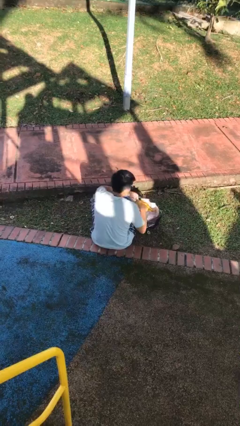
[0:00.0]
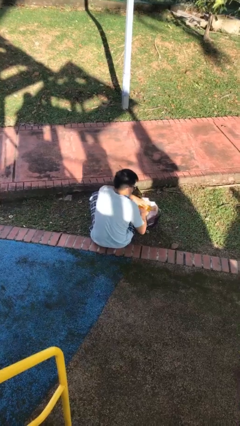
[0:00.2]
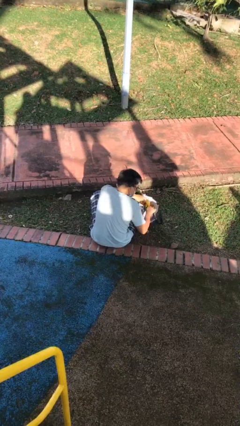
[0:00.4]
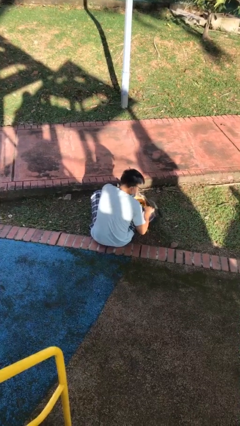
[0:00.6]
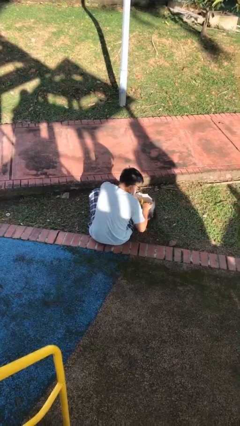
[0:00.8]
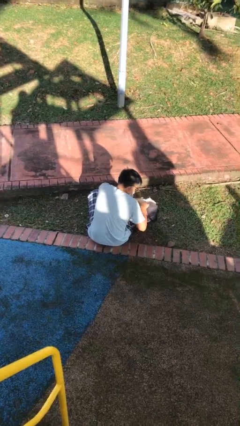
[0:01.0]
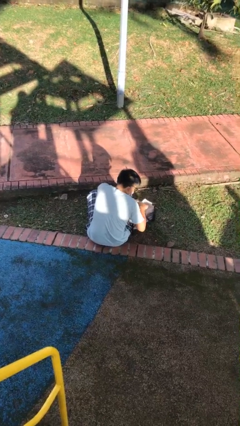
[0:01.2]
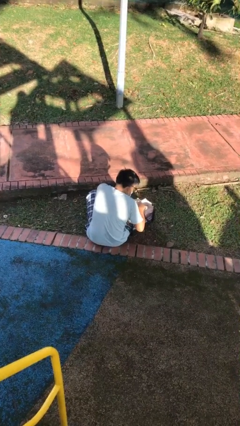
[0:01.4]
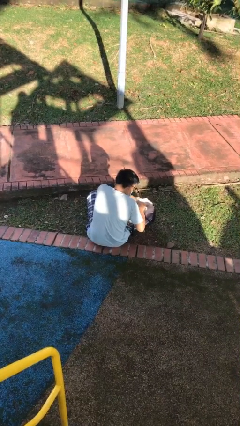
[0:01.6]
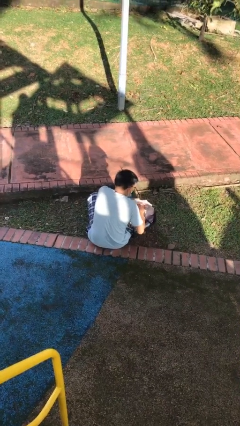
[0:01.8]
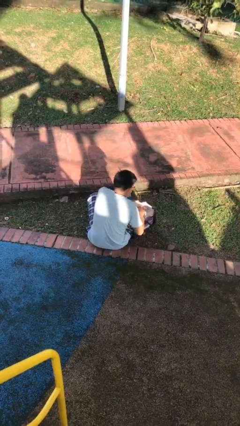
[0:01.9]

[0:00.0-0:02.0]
person searches in bag

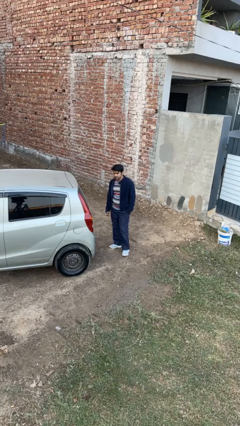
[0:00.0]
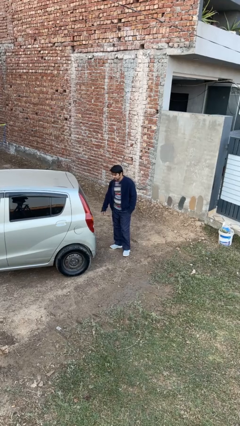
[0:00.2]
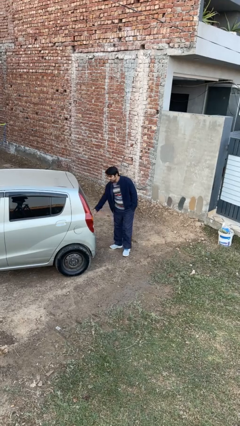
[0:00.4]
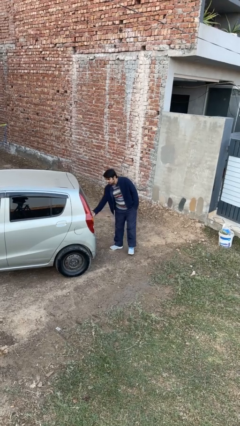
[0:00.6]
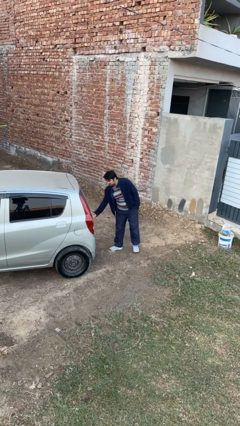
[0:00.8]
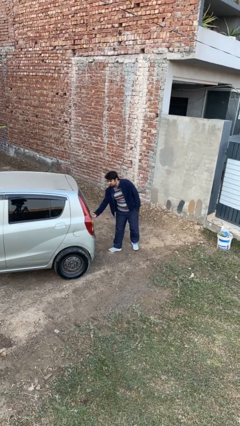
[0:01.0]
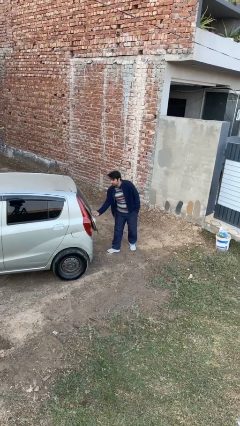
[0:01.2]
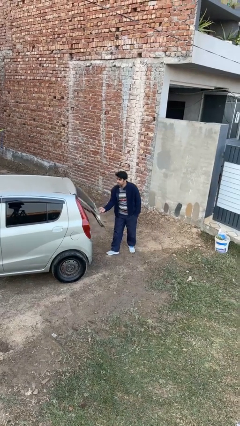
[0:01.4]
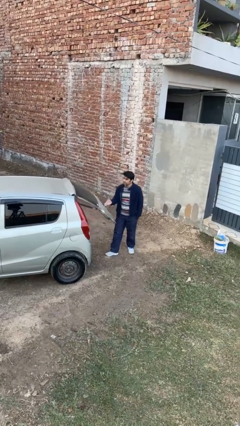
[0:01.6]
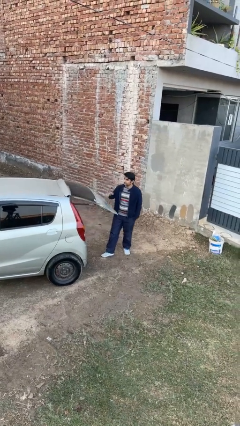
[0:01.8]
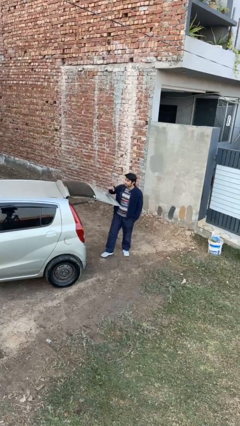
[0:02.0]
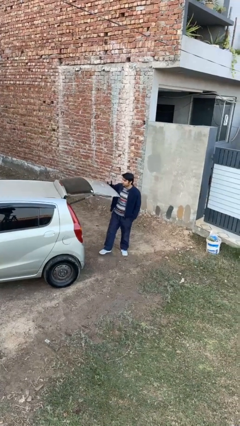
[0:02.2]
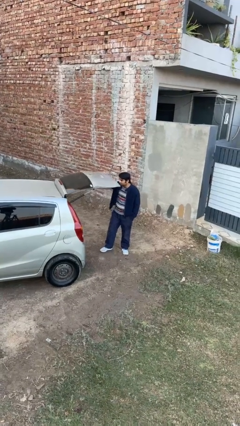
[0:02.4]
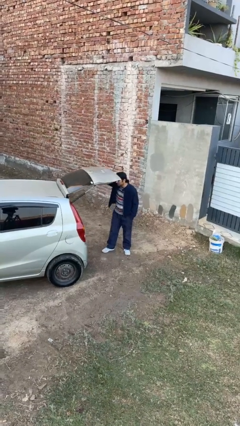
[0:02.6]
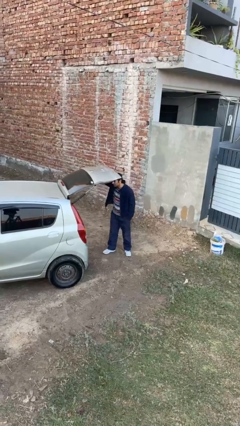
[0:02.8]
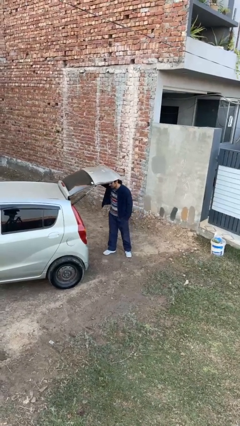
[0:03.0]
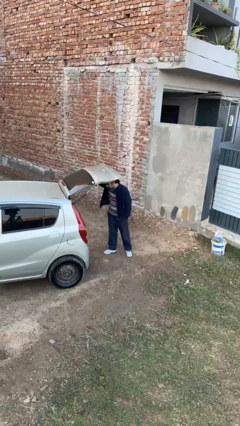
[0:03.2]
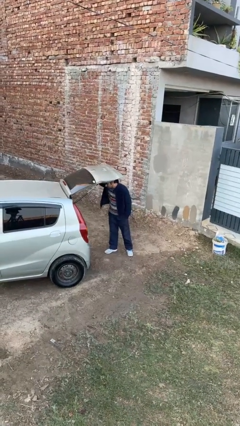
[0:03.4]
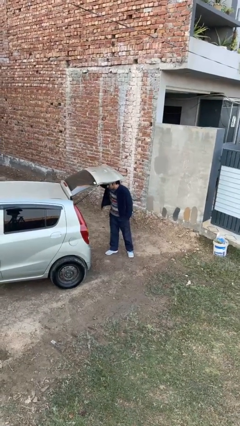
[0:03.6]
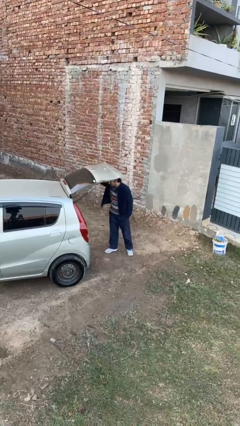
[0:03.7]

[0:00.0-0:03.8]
person opens car trunk

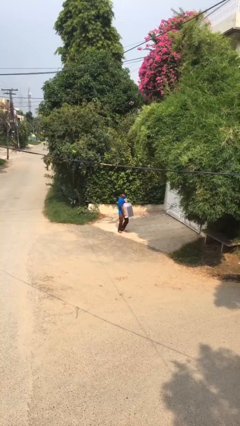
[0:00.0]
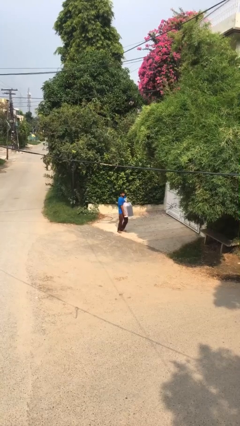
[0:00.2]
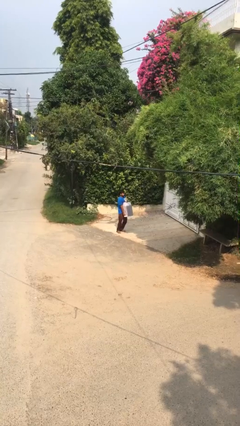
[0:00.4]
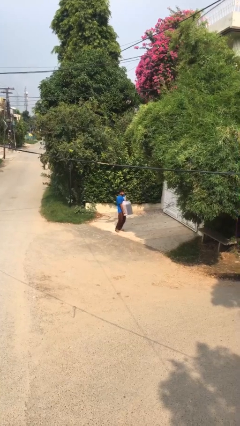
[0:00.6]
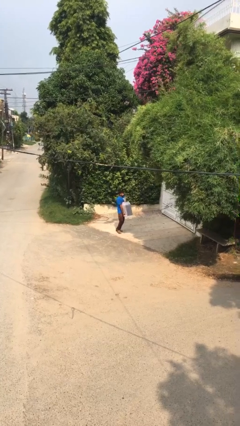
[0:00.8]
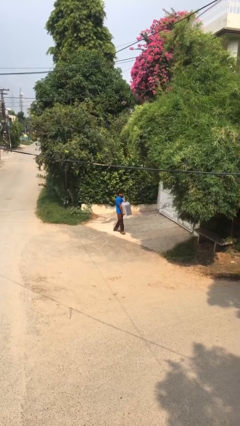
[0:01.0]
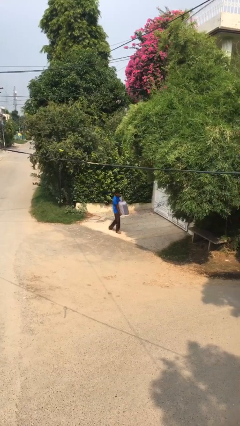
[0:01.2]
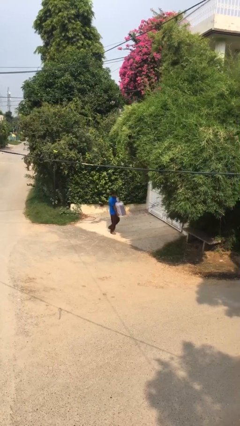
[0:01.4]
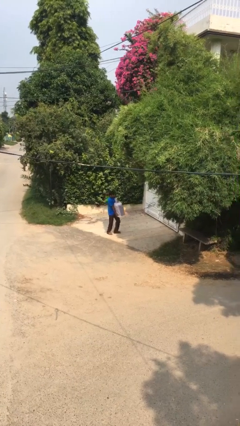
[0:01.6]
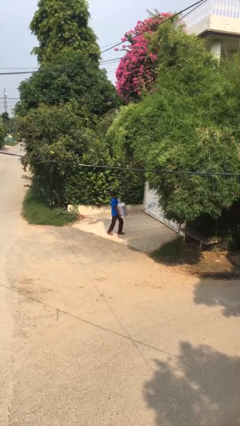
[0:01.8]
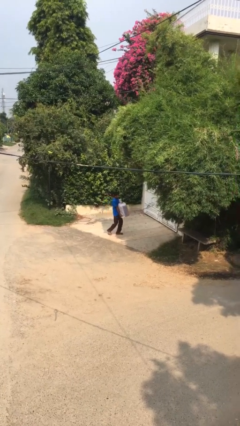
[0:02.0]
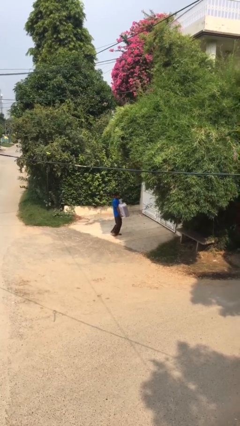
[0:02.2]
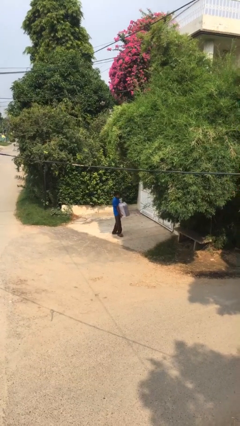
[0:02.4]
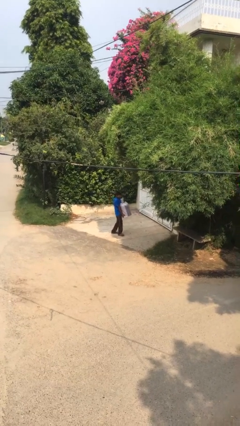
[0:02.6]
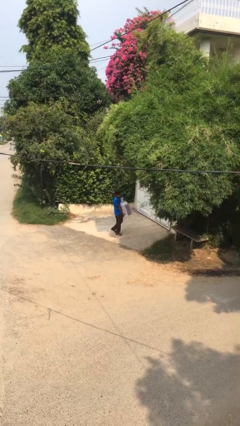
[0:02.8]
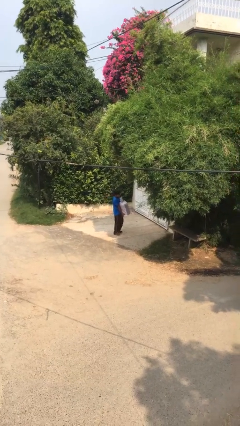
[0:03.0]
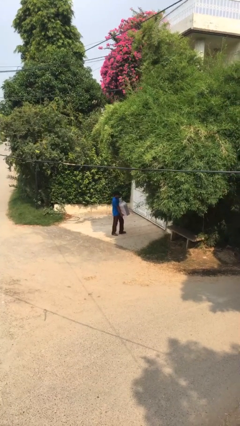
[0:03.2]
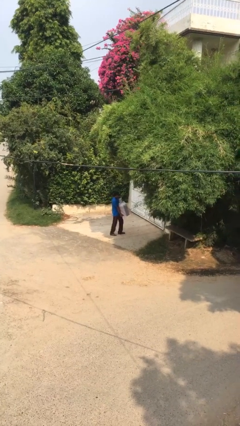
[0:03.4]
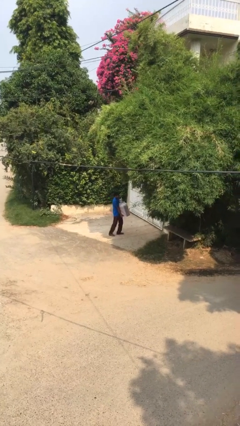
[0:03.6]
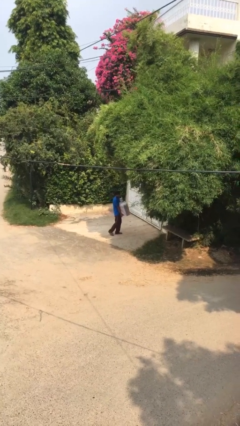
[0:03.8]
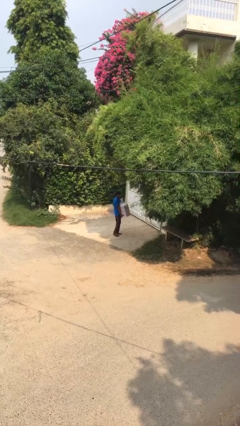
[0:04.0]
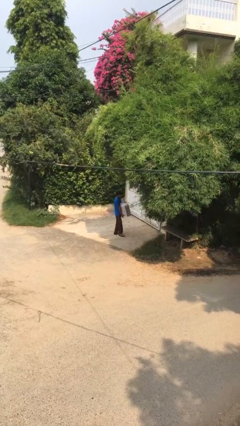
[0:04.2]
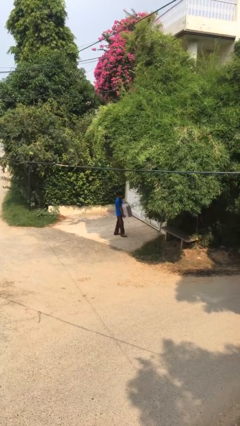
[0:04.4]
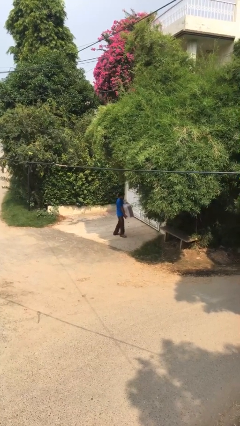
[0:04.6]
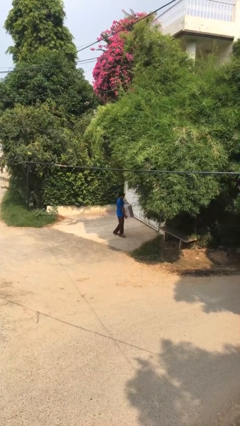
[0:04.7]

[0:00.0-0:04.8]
person carries heavy object

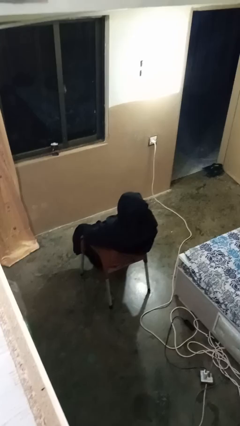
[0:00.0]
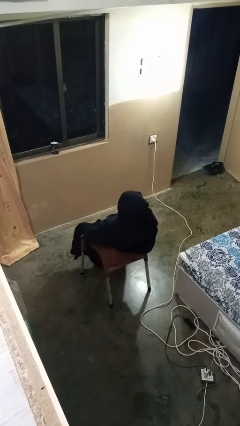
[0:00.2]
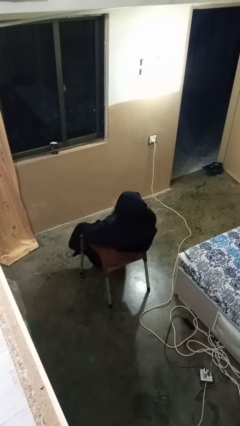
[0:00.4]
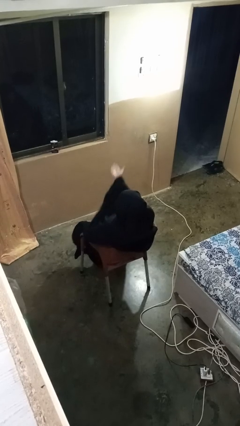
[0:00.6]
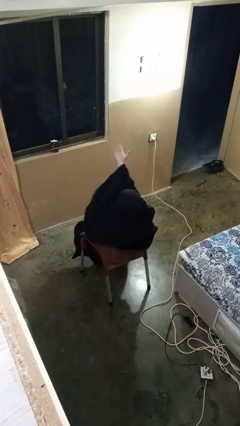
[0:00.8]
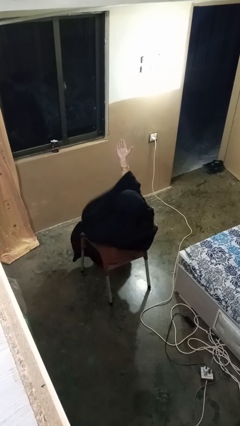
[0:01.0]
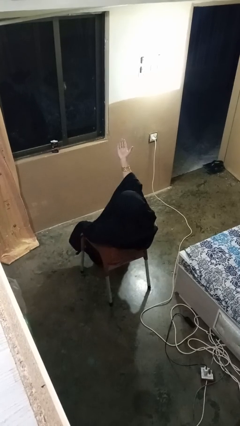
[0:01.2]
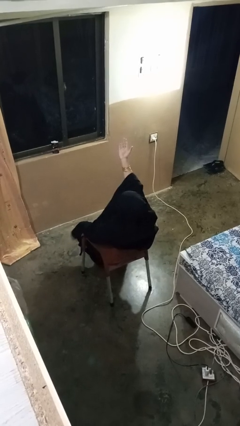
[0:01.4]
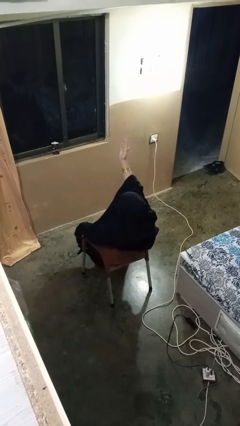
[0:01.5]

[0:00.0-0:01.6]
person gestures swipe up

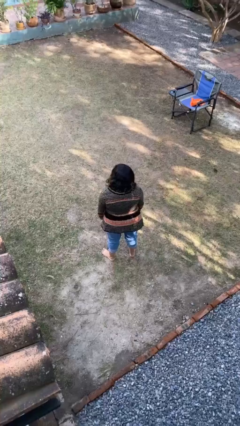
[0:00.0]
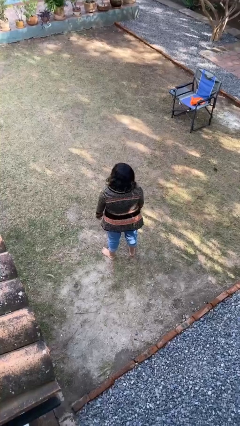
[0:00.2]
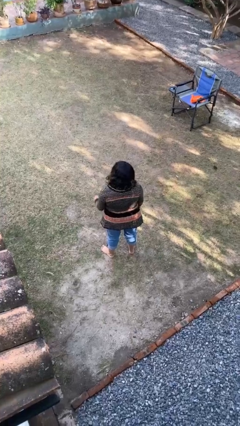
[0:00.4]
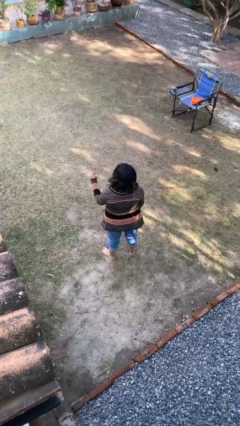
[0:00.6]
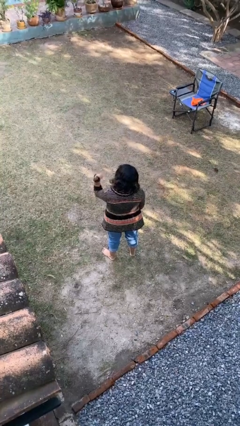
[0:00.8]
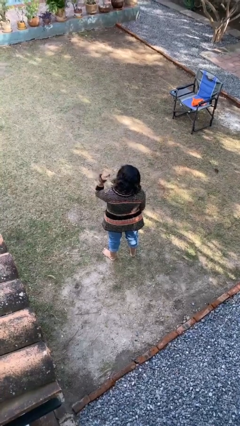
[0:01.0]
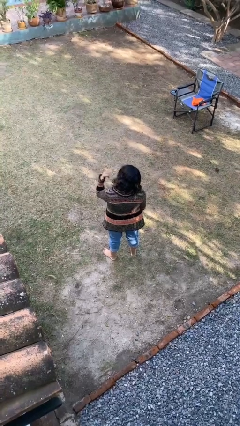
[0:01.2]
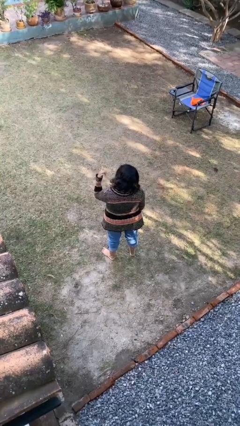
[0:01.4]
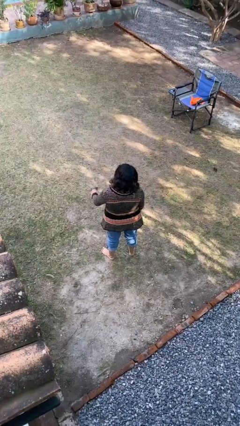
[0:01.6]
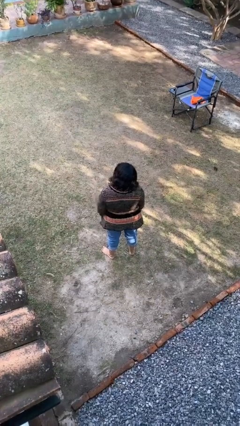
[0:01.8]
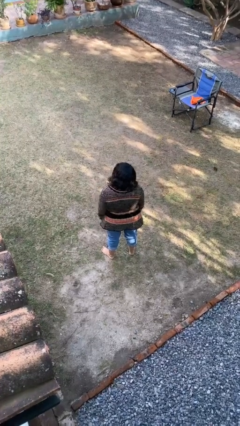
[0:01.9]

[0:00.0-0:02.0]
person gestures hang loose

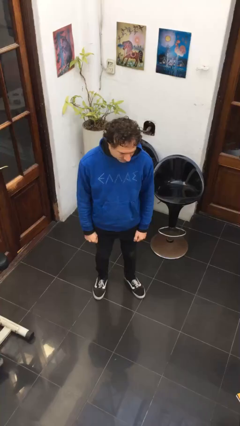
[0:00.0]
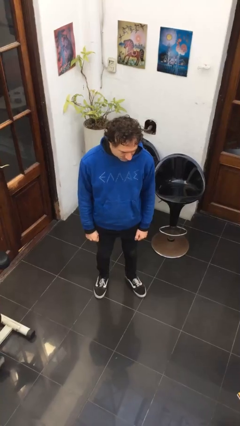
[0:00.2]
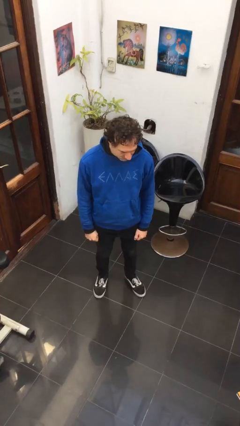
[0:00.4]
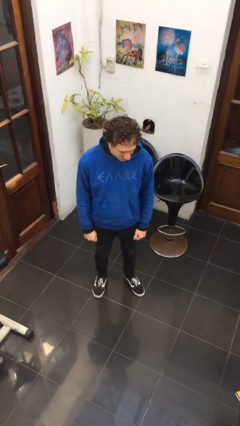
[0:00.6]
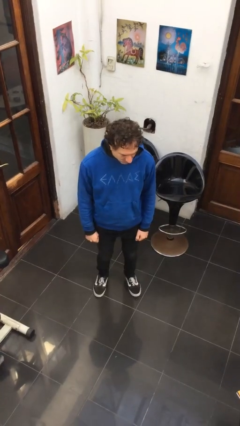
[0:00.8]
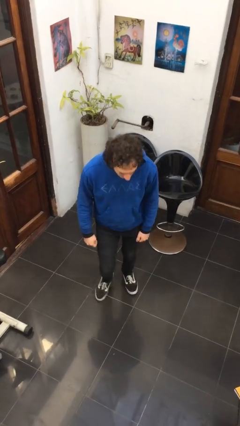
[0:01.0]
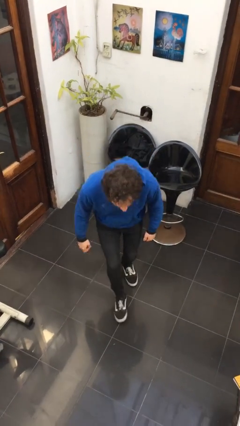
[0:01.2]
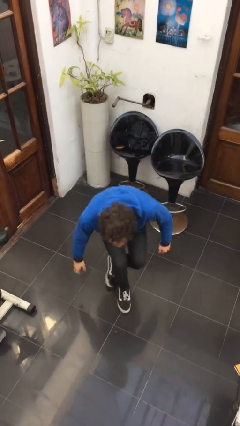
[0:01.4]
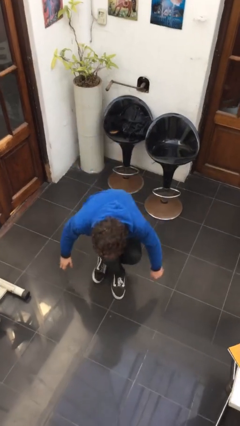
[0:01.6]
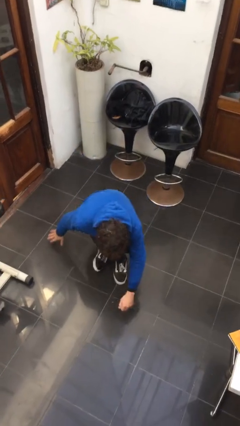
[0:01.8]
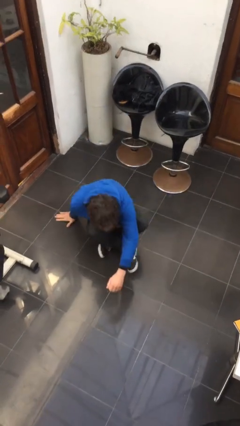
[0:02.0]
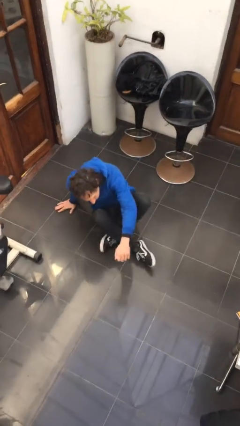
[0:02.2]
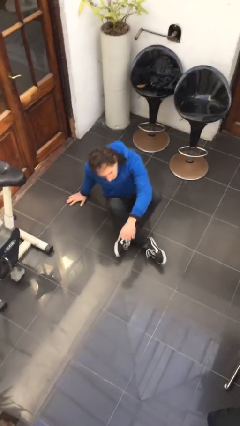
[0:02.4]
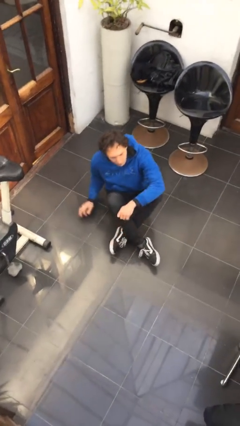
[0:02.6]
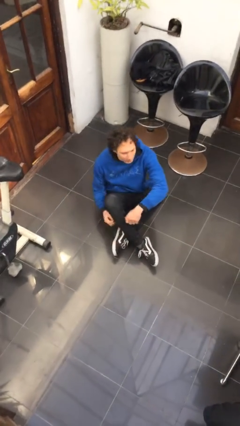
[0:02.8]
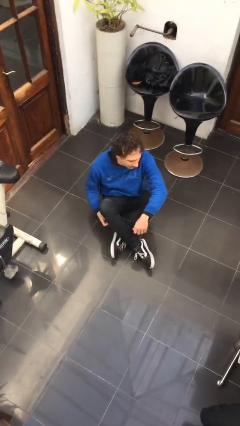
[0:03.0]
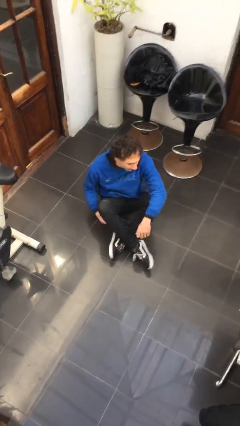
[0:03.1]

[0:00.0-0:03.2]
person sits crisscross
